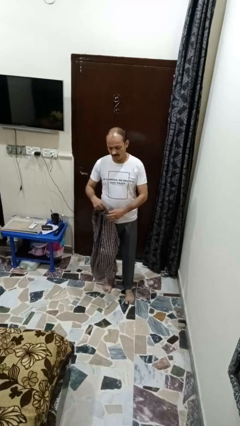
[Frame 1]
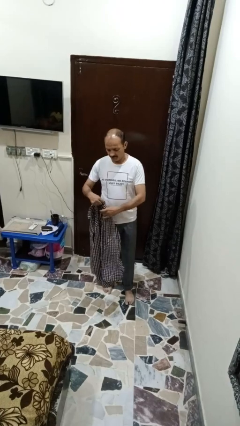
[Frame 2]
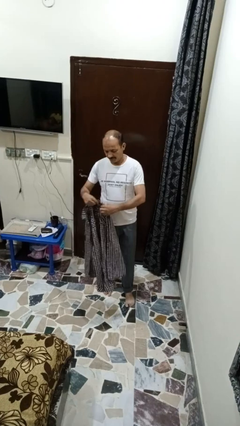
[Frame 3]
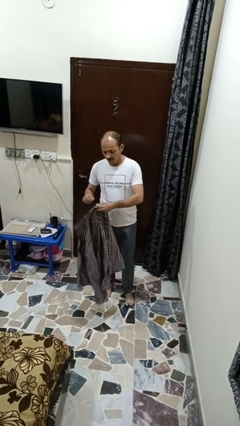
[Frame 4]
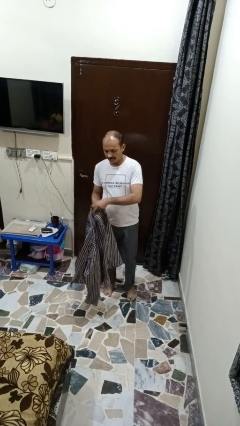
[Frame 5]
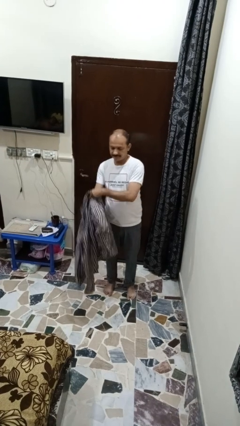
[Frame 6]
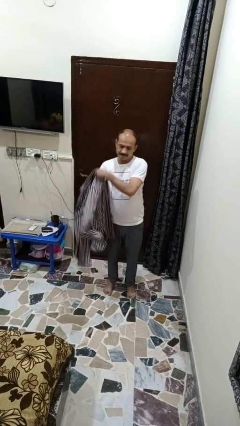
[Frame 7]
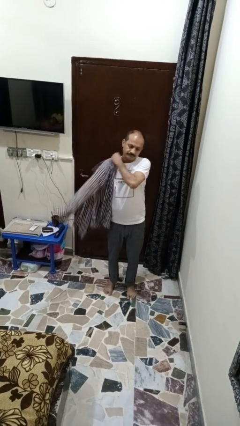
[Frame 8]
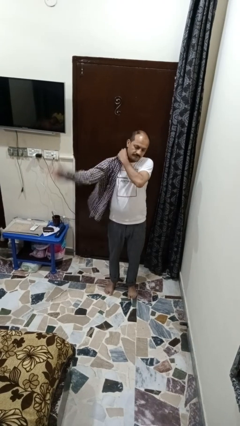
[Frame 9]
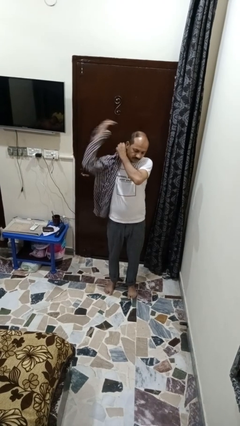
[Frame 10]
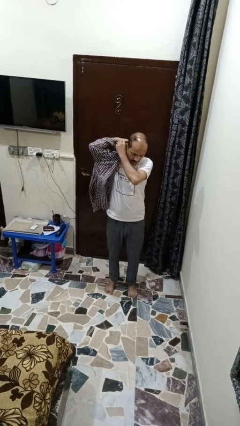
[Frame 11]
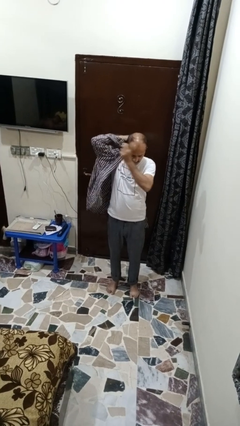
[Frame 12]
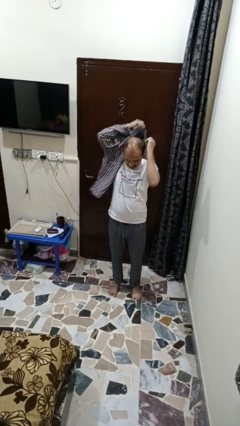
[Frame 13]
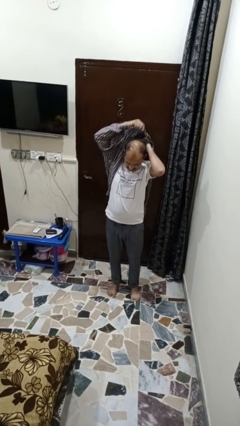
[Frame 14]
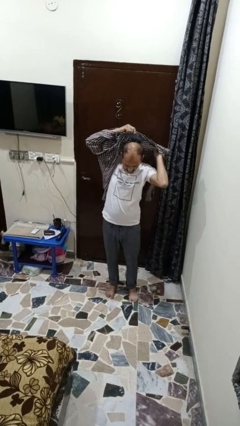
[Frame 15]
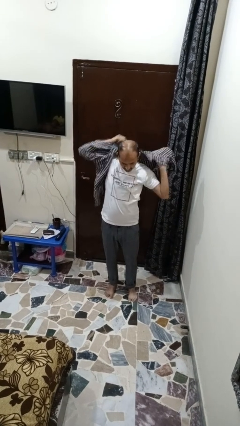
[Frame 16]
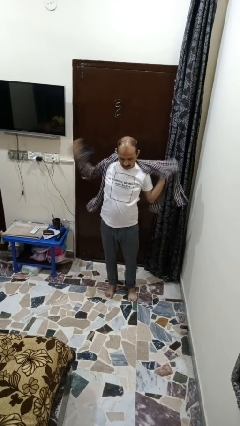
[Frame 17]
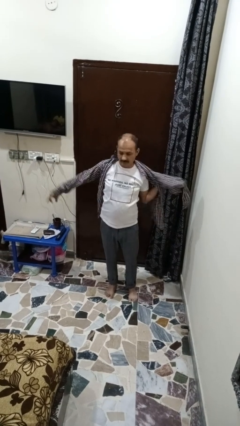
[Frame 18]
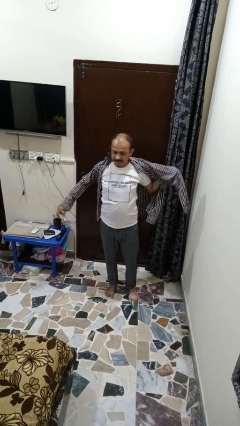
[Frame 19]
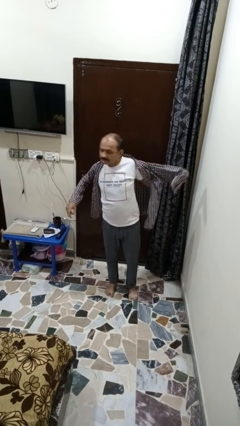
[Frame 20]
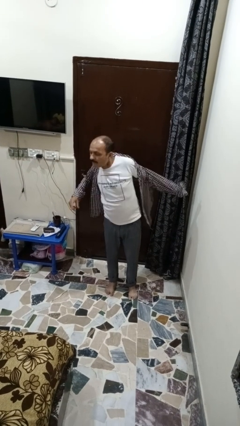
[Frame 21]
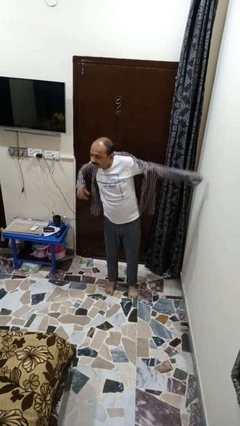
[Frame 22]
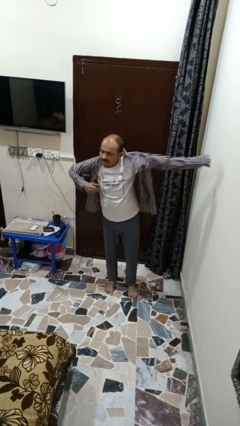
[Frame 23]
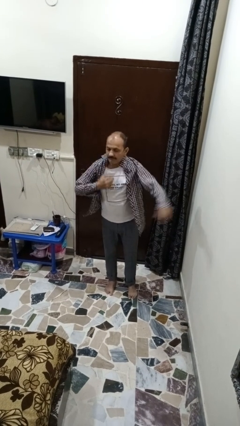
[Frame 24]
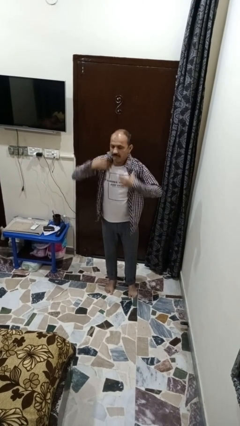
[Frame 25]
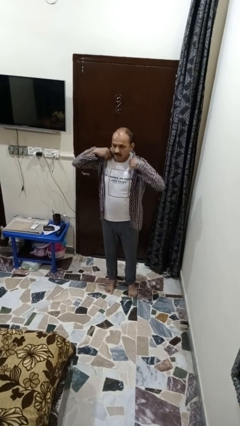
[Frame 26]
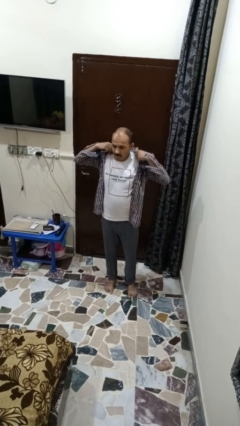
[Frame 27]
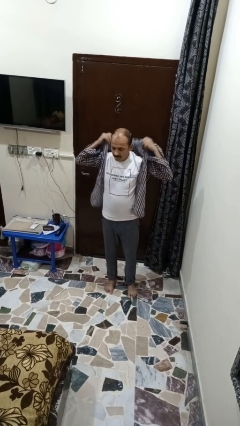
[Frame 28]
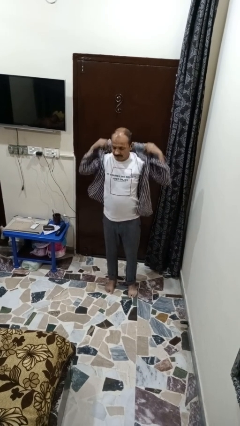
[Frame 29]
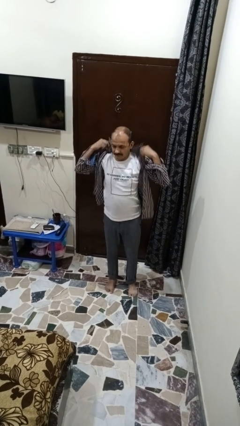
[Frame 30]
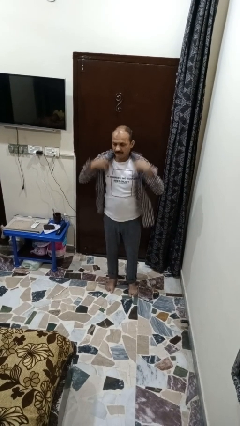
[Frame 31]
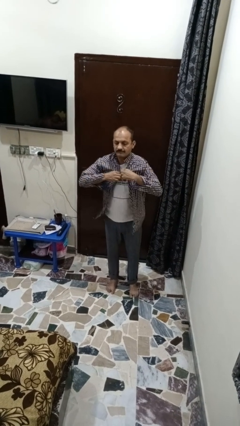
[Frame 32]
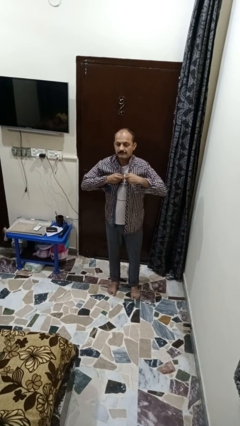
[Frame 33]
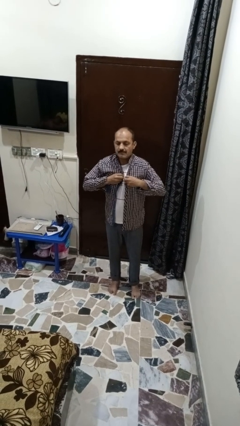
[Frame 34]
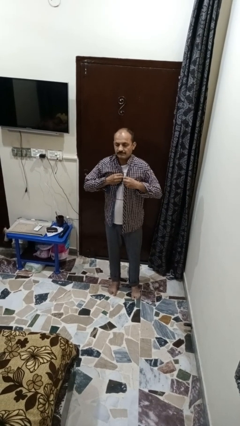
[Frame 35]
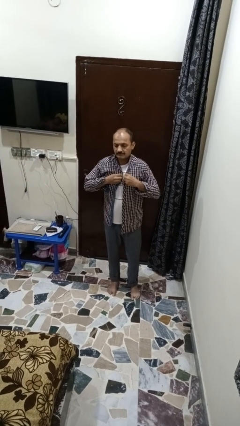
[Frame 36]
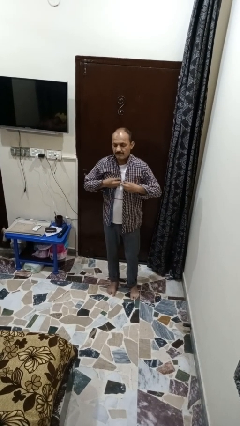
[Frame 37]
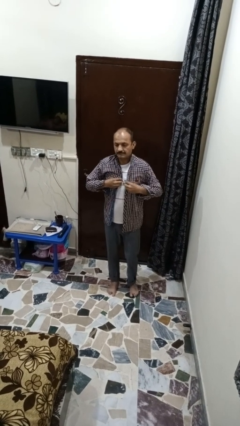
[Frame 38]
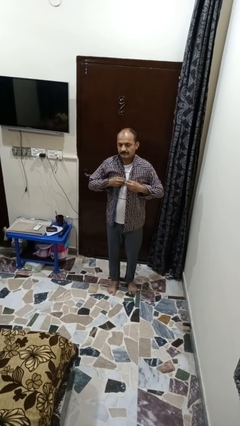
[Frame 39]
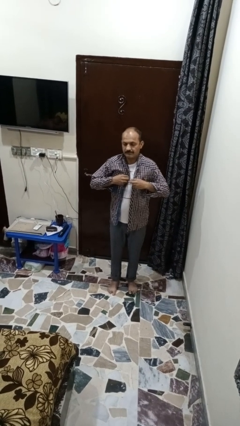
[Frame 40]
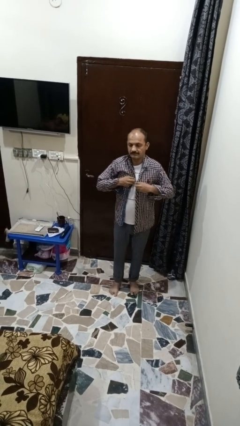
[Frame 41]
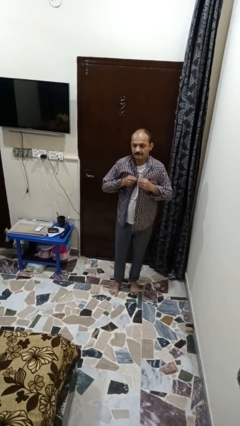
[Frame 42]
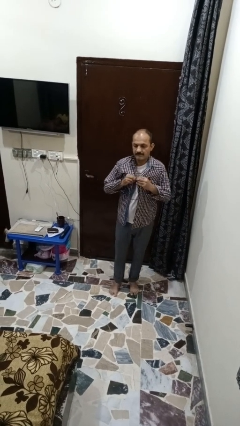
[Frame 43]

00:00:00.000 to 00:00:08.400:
person puts on shirt

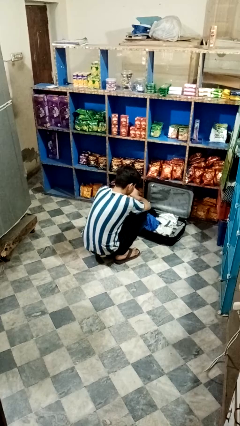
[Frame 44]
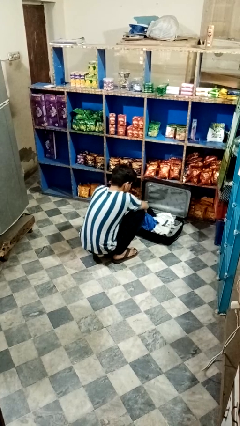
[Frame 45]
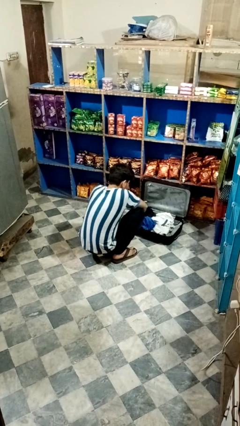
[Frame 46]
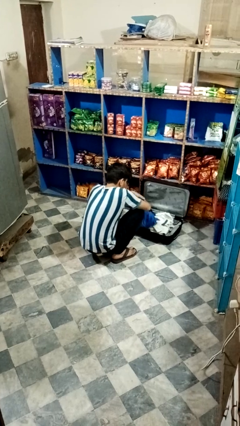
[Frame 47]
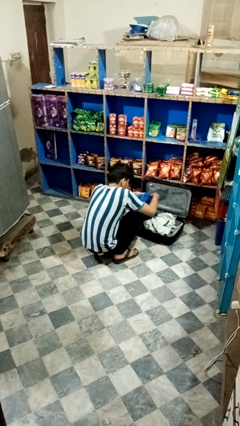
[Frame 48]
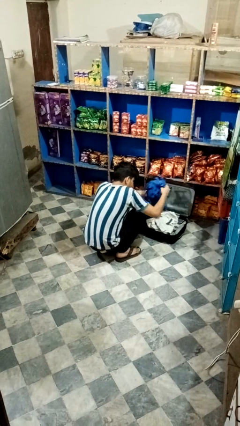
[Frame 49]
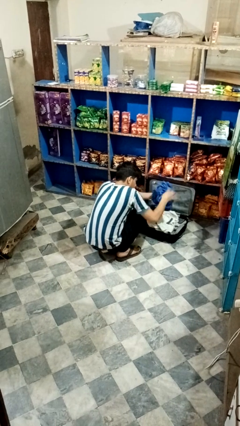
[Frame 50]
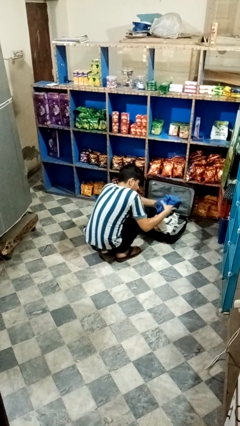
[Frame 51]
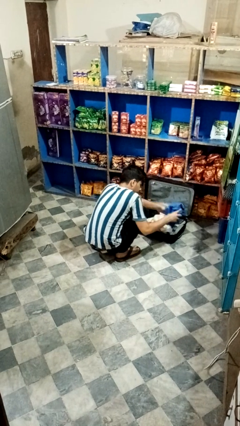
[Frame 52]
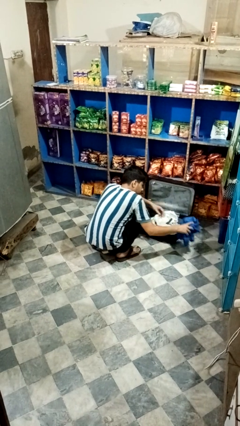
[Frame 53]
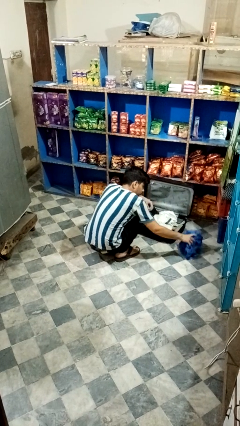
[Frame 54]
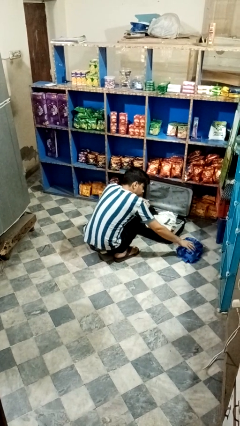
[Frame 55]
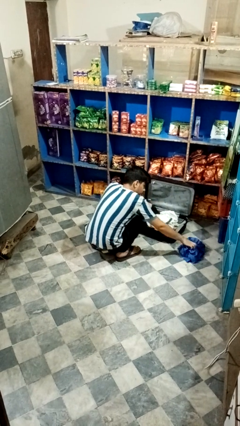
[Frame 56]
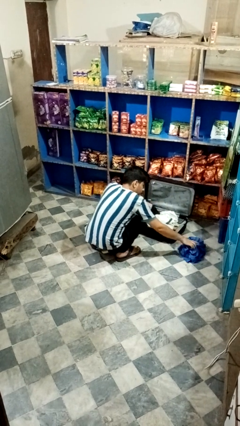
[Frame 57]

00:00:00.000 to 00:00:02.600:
person unloads clothes from suitcase

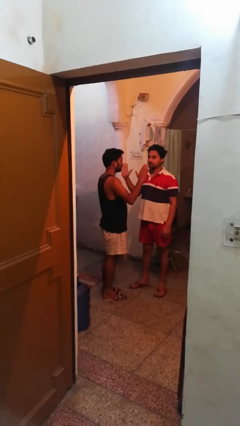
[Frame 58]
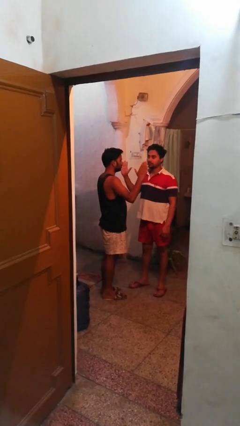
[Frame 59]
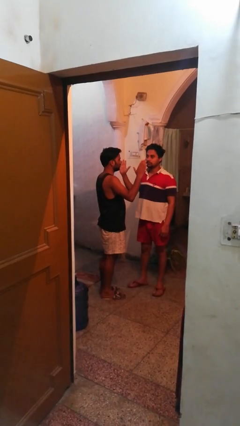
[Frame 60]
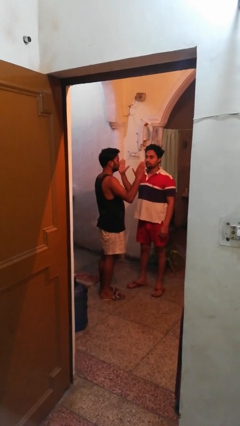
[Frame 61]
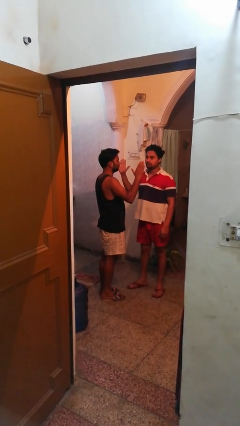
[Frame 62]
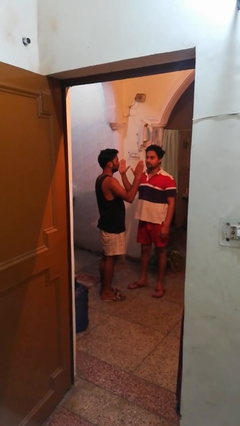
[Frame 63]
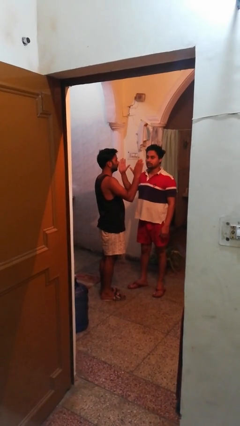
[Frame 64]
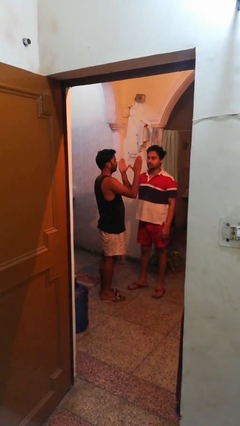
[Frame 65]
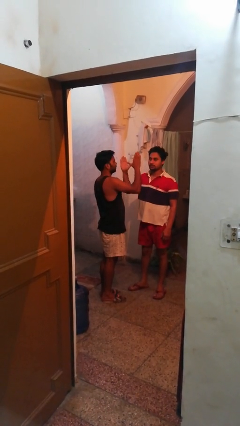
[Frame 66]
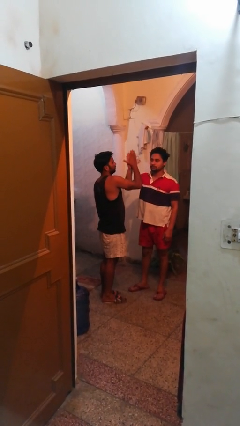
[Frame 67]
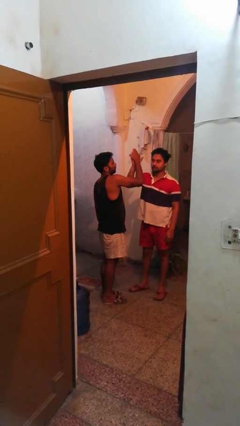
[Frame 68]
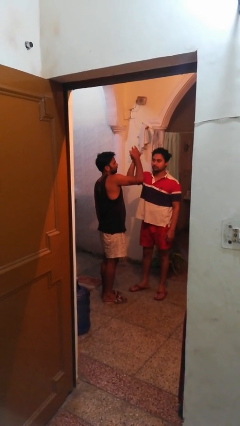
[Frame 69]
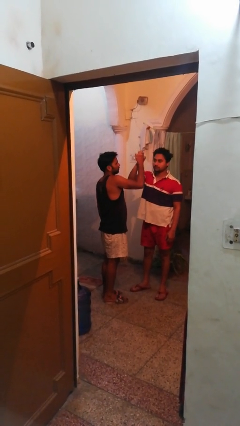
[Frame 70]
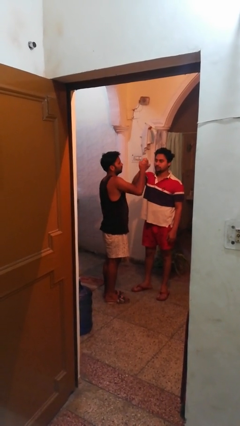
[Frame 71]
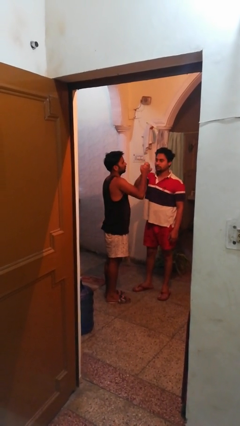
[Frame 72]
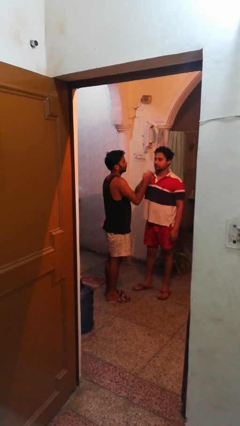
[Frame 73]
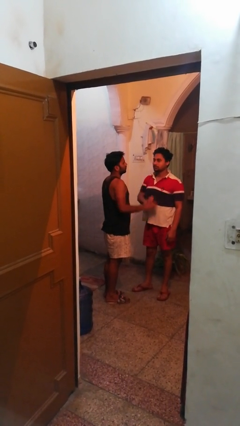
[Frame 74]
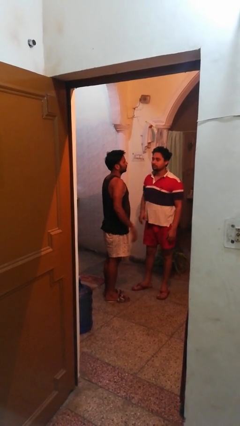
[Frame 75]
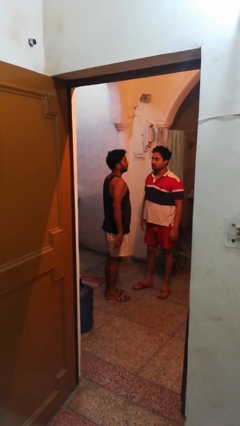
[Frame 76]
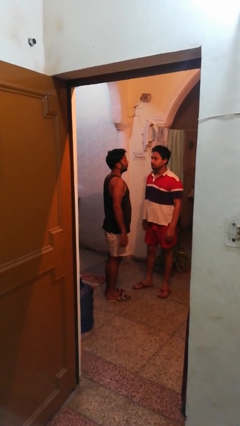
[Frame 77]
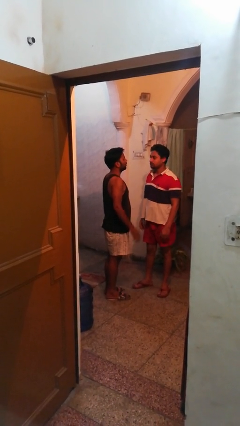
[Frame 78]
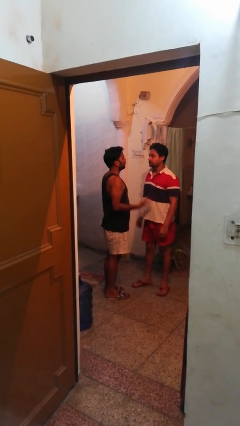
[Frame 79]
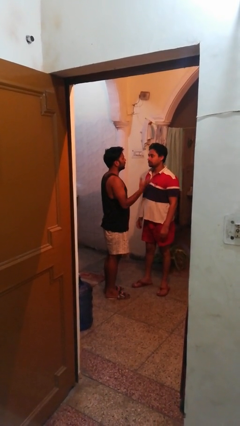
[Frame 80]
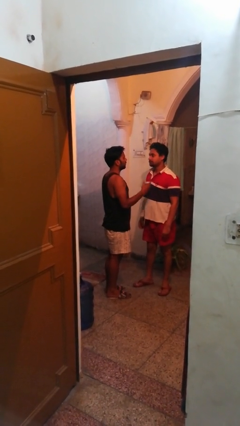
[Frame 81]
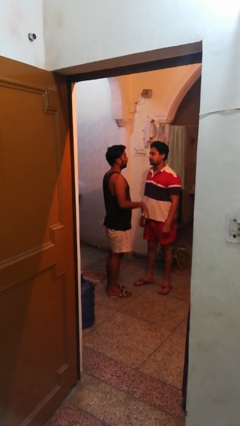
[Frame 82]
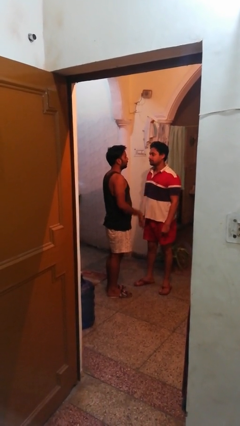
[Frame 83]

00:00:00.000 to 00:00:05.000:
person highfives hand

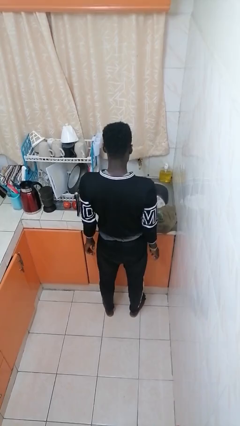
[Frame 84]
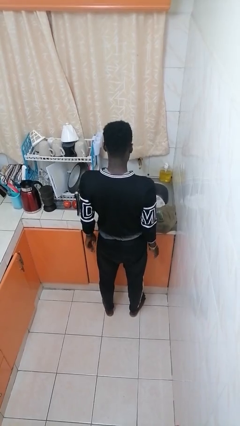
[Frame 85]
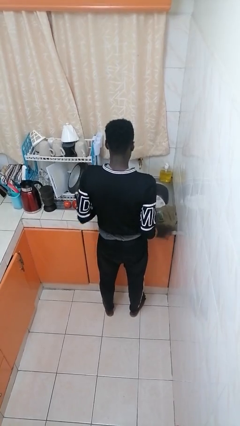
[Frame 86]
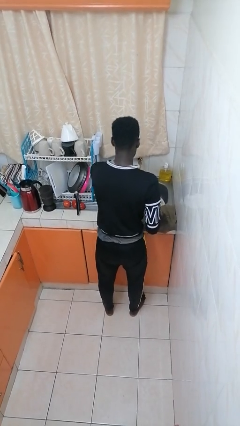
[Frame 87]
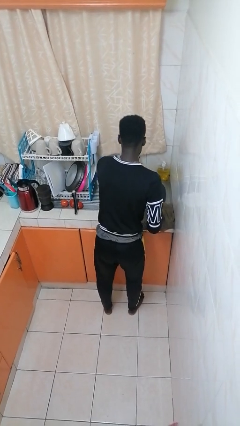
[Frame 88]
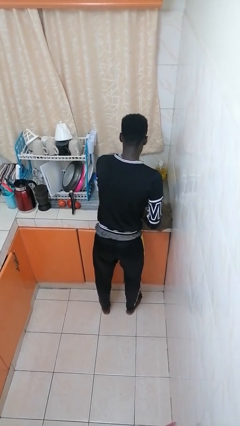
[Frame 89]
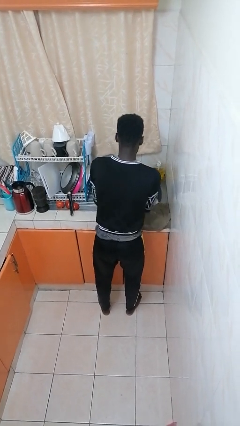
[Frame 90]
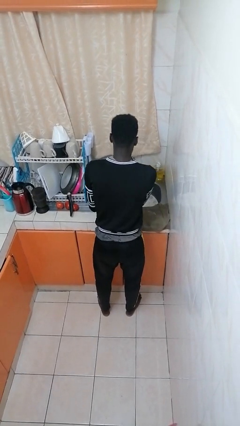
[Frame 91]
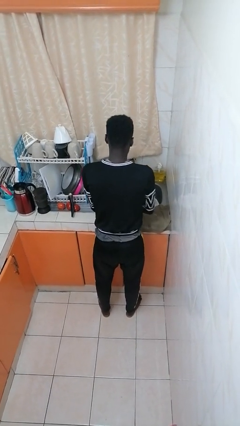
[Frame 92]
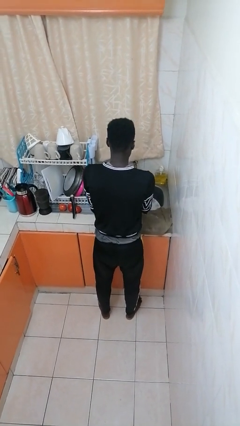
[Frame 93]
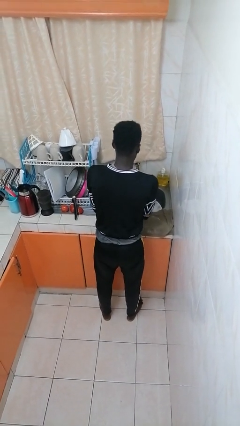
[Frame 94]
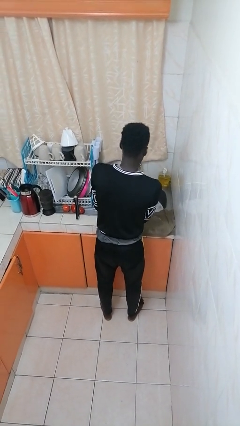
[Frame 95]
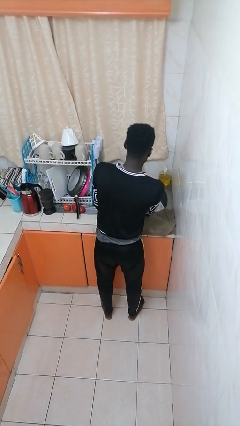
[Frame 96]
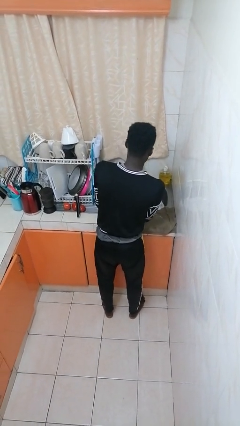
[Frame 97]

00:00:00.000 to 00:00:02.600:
person washes dish
